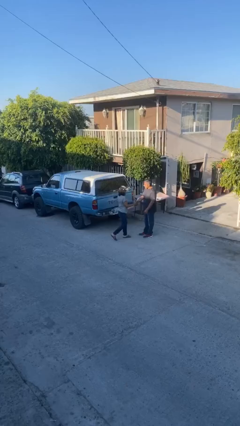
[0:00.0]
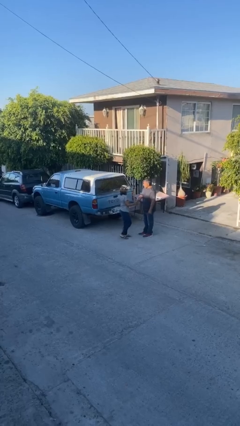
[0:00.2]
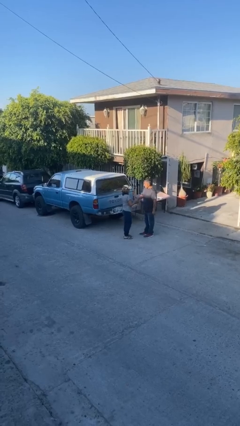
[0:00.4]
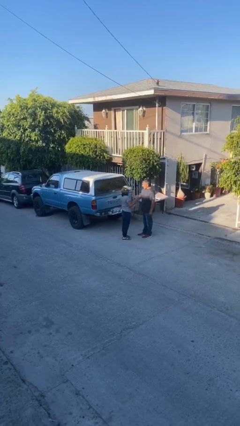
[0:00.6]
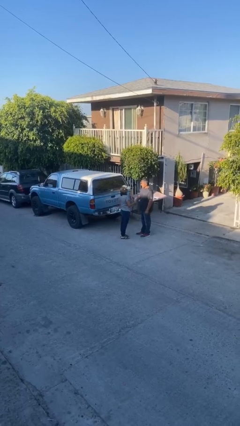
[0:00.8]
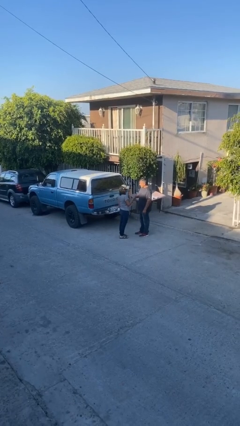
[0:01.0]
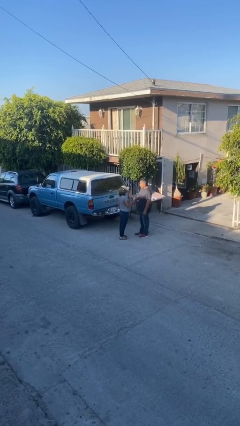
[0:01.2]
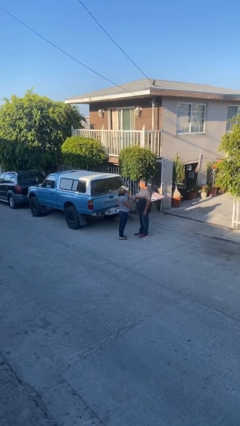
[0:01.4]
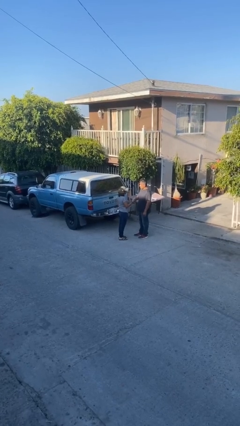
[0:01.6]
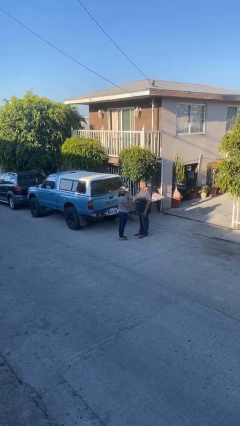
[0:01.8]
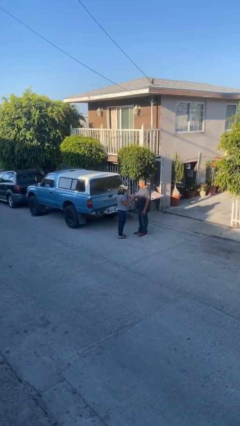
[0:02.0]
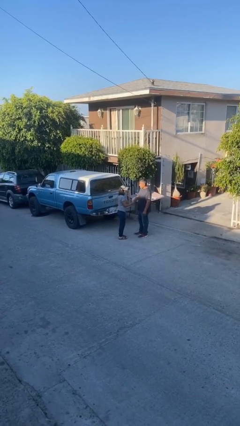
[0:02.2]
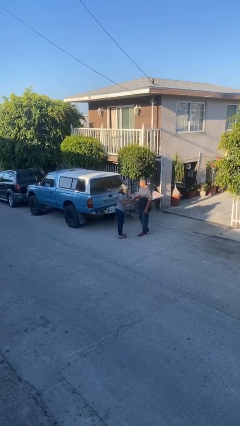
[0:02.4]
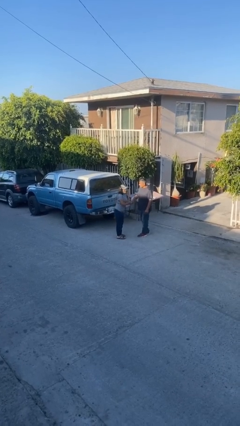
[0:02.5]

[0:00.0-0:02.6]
person shakes hand

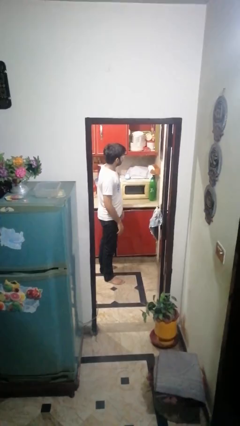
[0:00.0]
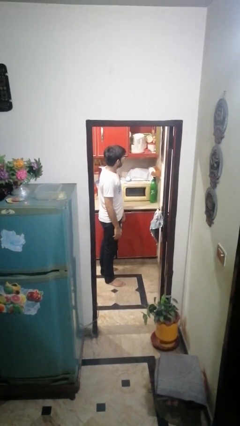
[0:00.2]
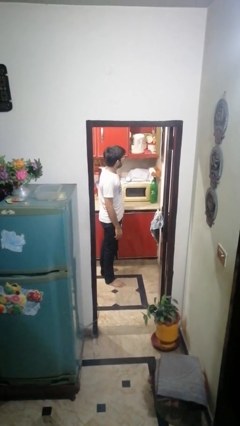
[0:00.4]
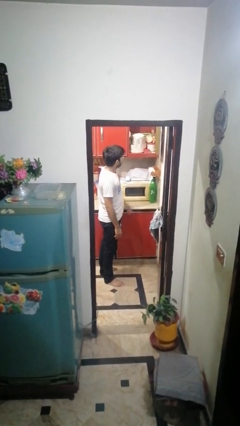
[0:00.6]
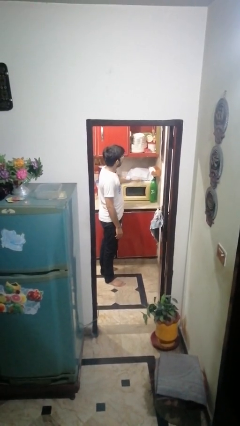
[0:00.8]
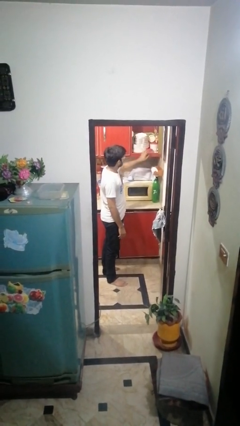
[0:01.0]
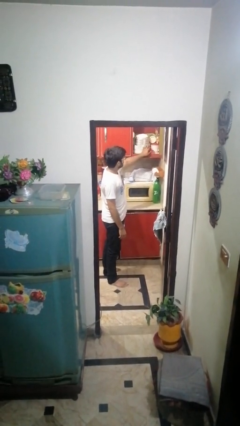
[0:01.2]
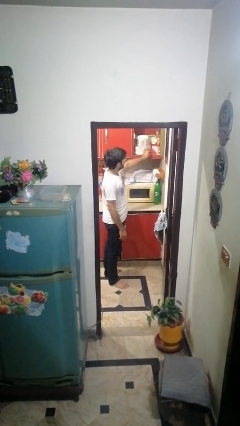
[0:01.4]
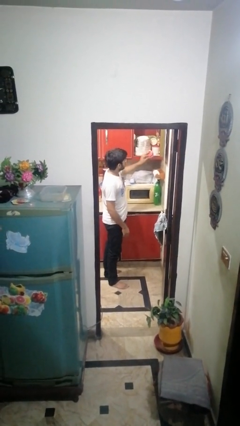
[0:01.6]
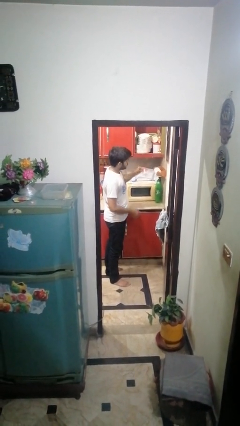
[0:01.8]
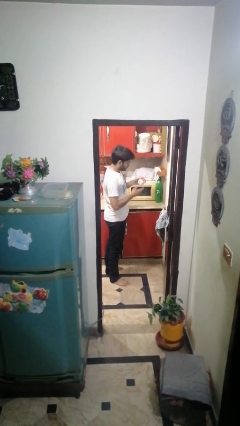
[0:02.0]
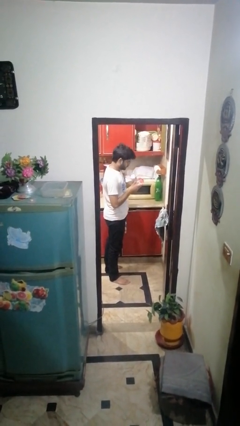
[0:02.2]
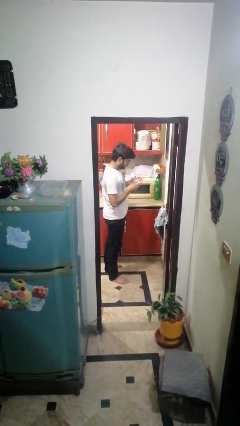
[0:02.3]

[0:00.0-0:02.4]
person picks up object from cabinet

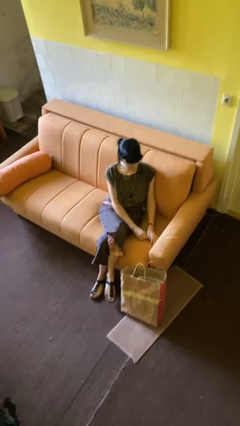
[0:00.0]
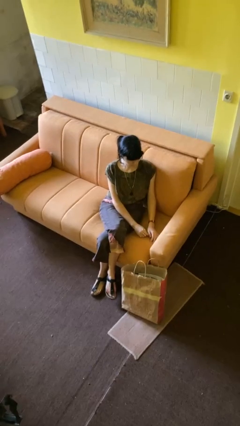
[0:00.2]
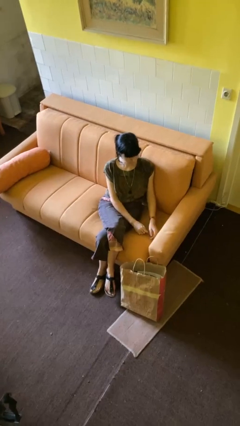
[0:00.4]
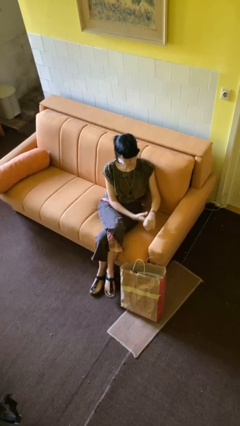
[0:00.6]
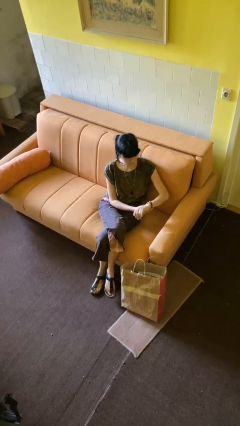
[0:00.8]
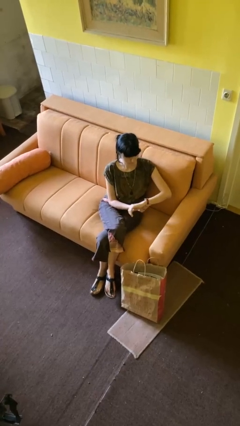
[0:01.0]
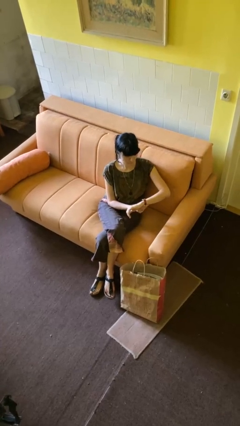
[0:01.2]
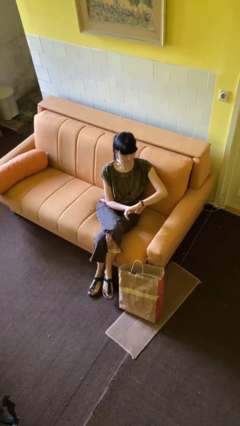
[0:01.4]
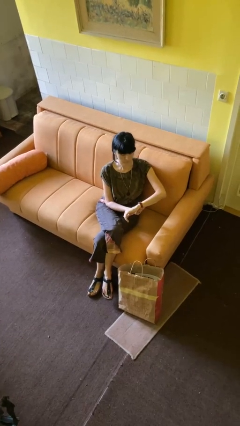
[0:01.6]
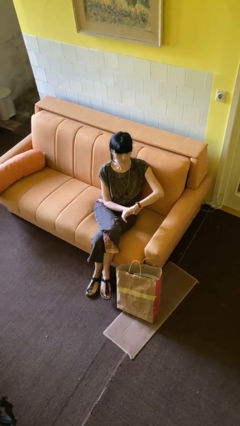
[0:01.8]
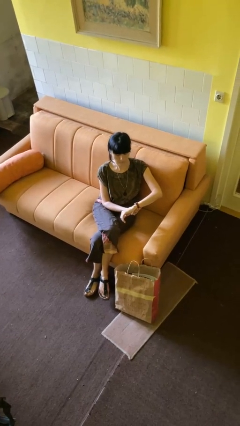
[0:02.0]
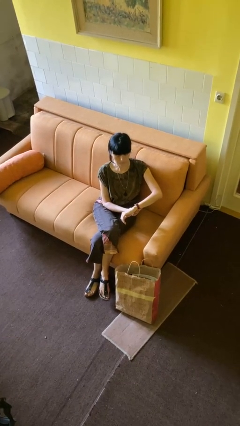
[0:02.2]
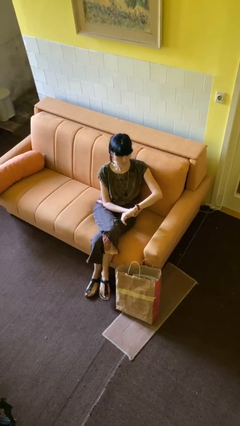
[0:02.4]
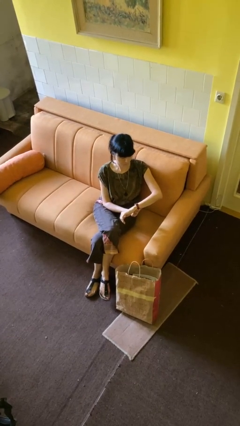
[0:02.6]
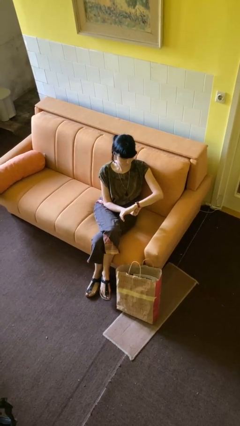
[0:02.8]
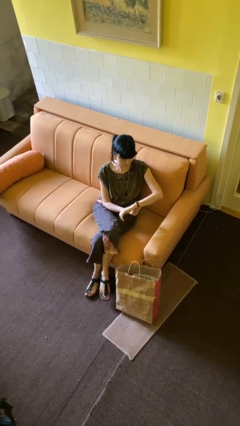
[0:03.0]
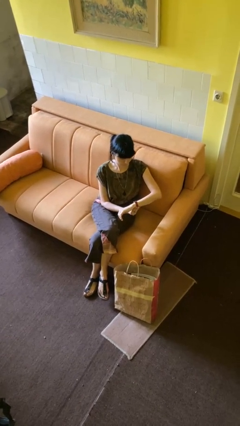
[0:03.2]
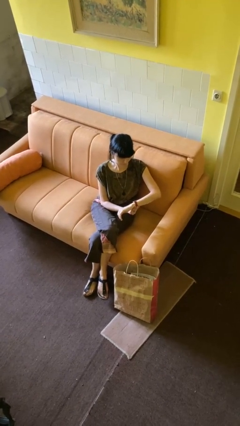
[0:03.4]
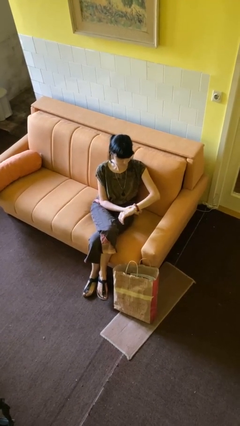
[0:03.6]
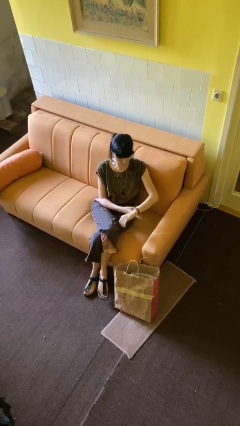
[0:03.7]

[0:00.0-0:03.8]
person looks at wristwatch

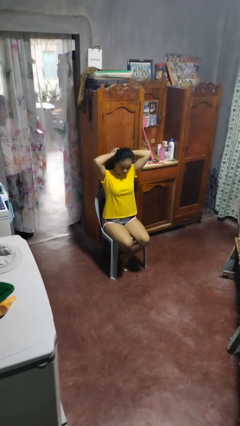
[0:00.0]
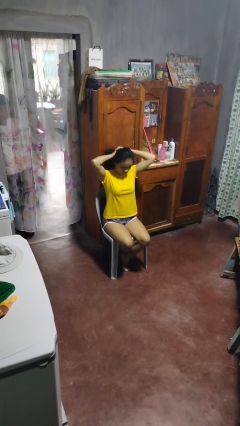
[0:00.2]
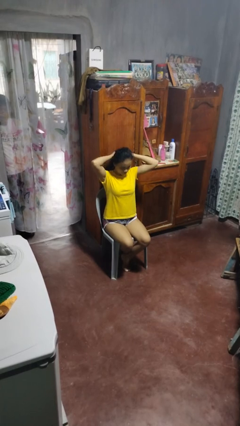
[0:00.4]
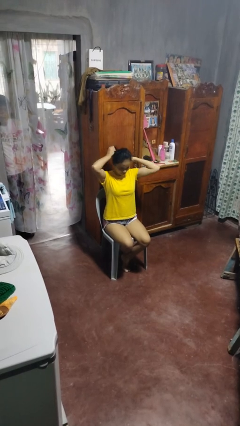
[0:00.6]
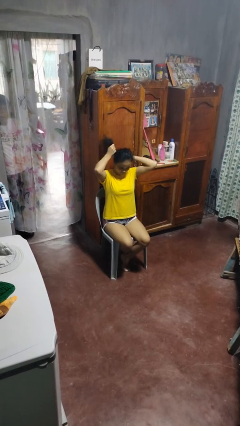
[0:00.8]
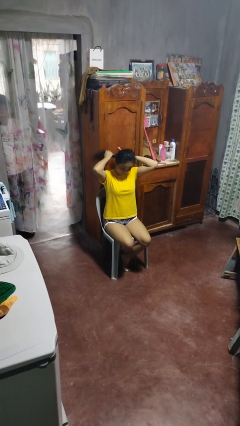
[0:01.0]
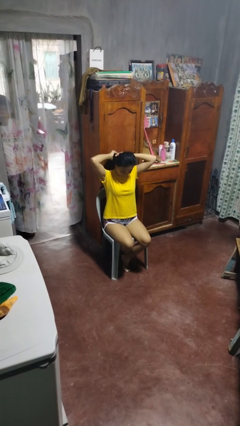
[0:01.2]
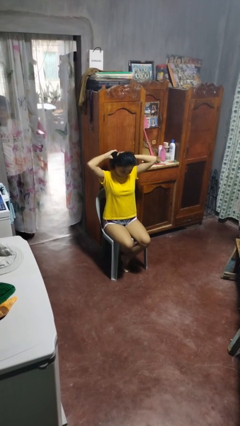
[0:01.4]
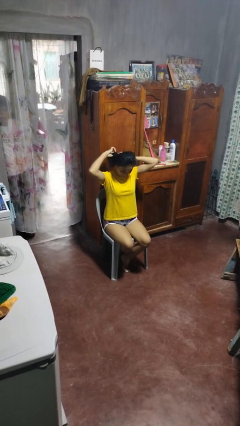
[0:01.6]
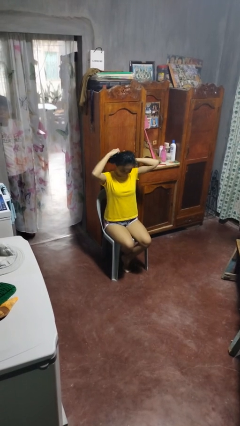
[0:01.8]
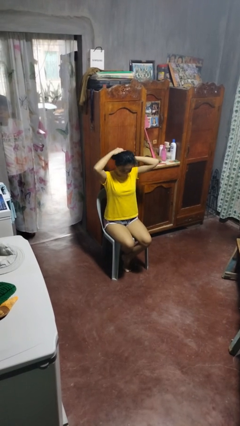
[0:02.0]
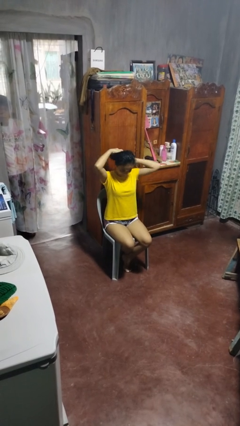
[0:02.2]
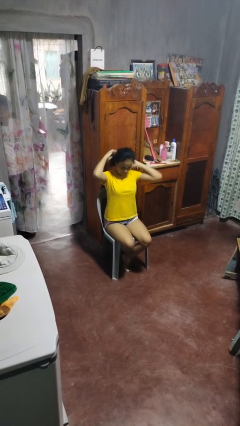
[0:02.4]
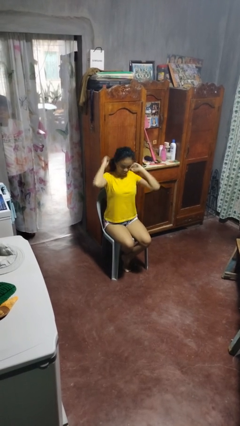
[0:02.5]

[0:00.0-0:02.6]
person puts hair in ponytail

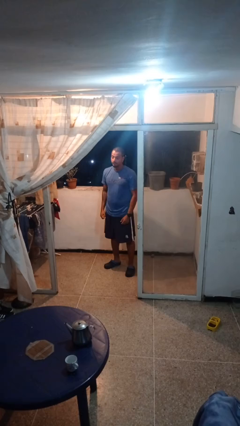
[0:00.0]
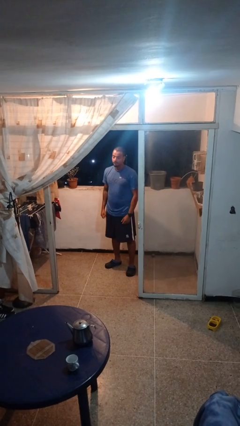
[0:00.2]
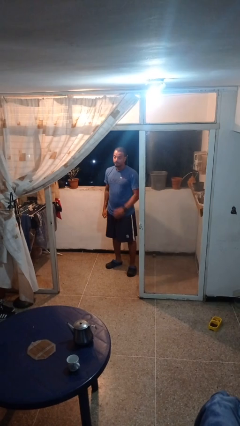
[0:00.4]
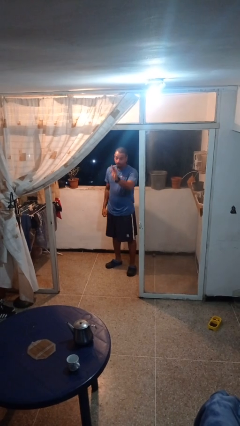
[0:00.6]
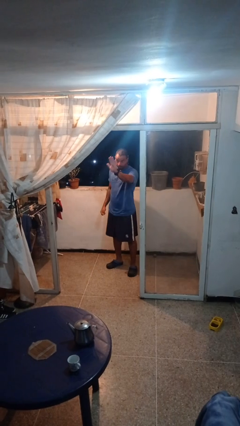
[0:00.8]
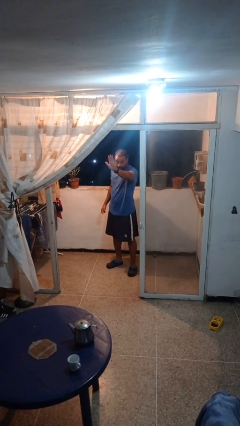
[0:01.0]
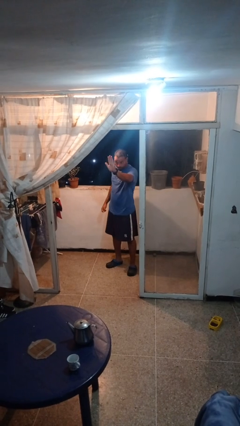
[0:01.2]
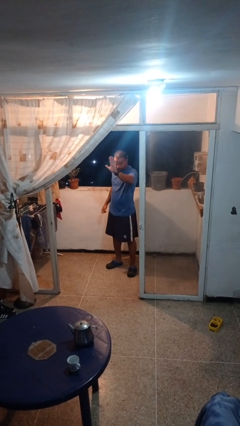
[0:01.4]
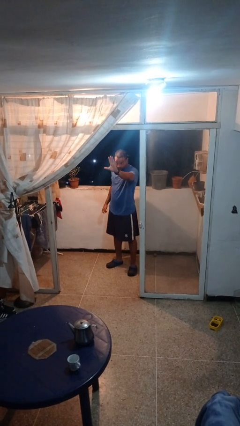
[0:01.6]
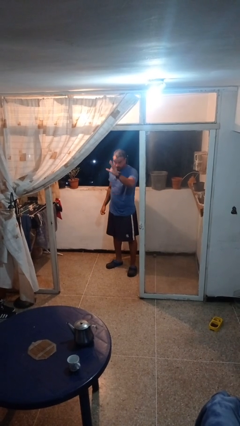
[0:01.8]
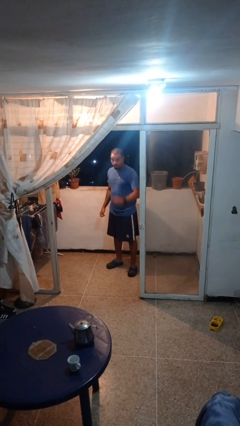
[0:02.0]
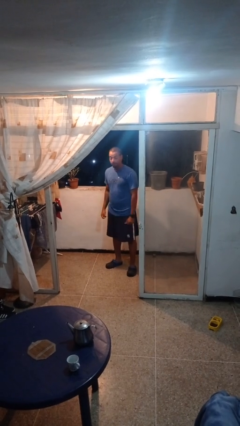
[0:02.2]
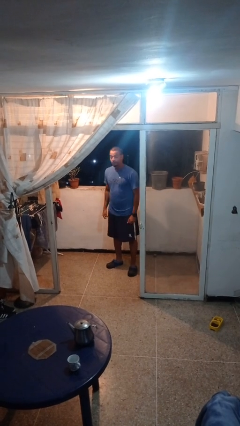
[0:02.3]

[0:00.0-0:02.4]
person gestures stop

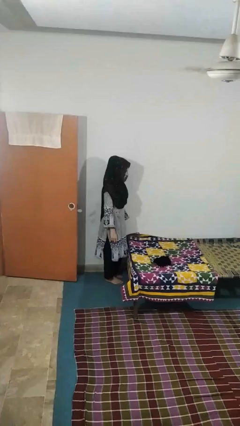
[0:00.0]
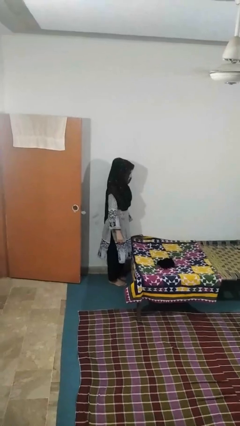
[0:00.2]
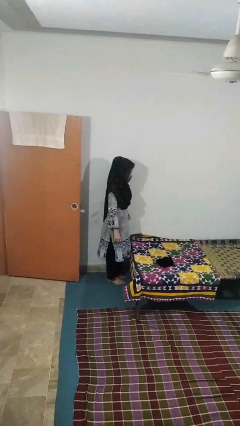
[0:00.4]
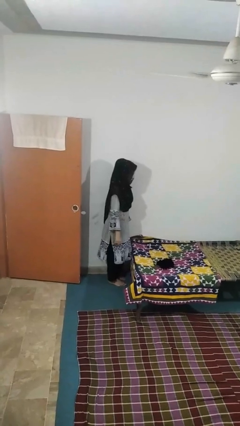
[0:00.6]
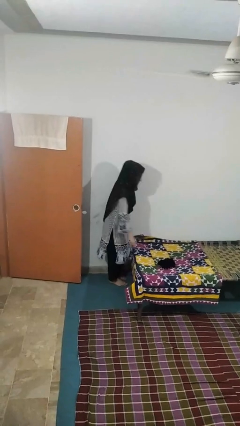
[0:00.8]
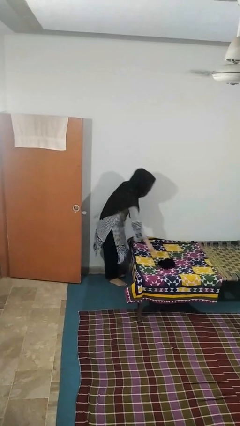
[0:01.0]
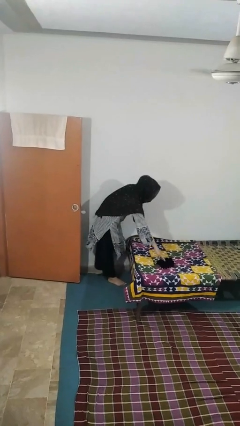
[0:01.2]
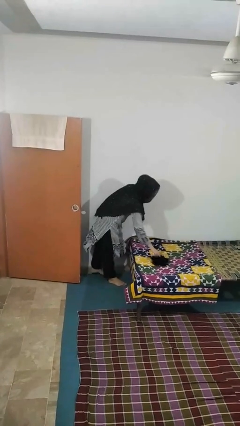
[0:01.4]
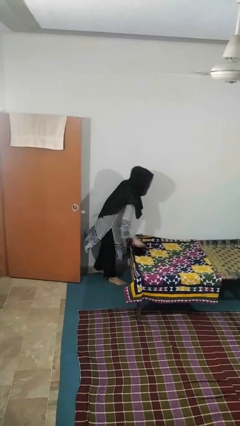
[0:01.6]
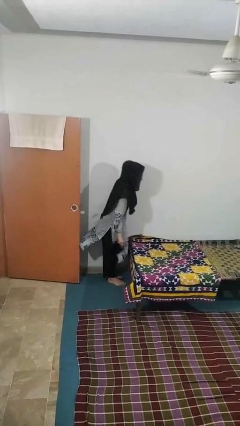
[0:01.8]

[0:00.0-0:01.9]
person picks up object from bed

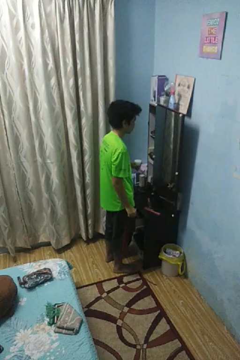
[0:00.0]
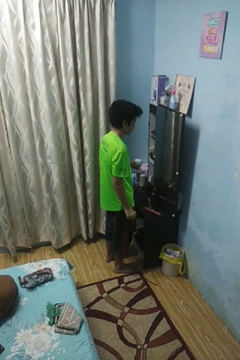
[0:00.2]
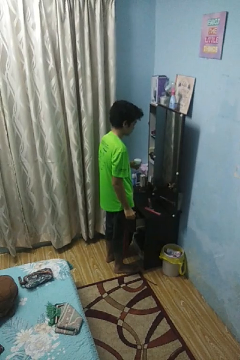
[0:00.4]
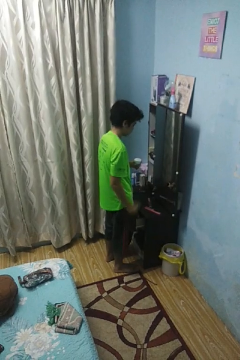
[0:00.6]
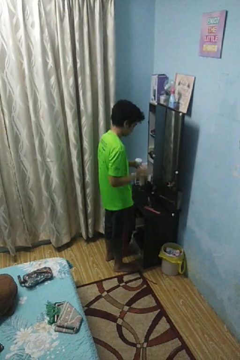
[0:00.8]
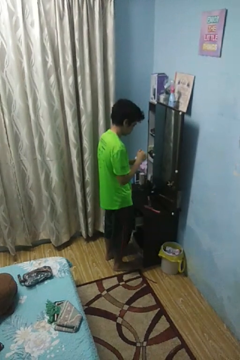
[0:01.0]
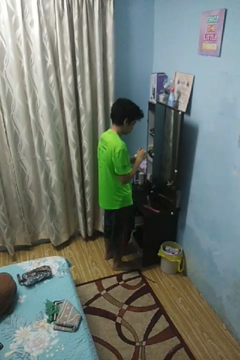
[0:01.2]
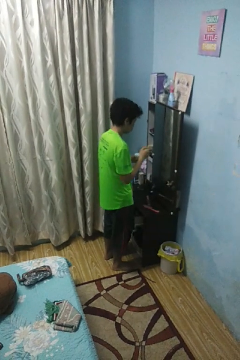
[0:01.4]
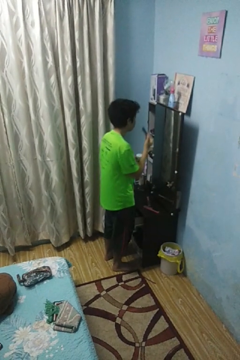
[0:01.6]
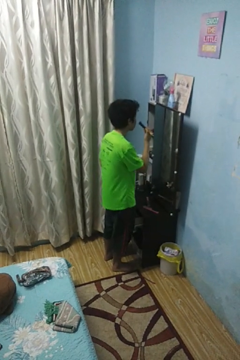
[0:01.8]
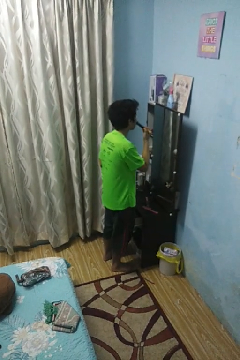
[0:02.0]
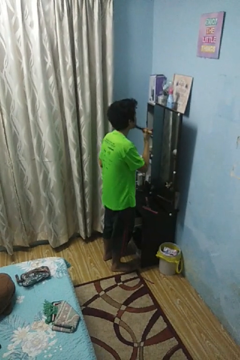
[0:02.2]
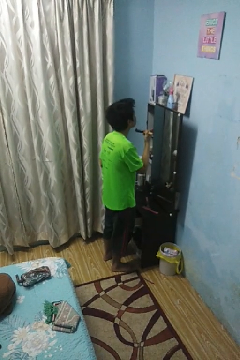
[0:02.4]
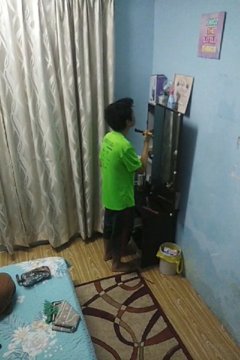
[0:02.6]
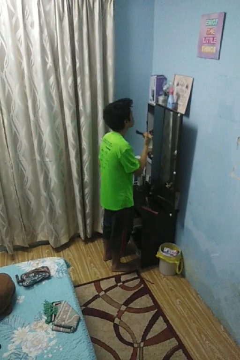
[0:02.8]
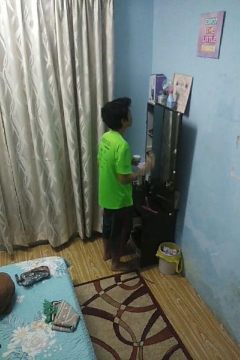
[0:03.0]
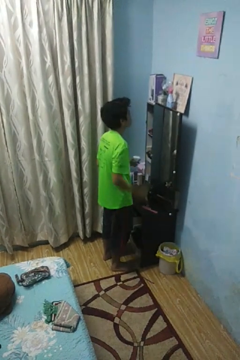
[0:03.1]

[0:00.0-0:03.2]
person applies foundation makeup